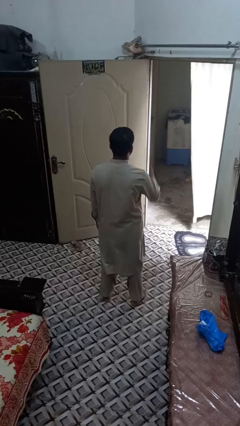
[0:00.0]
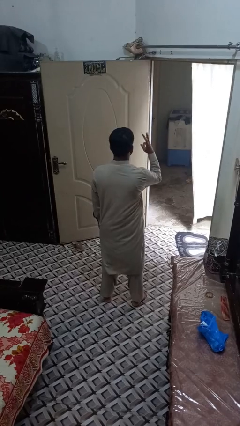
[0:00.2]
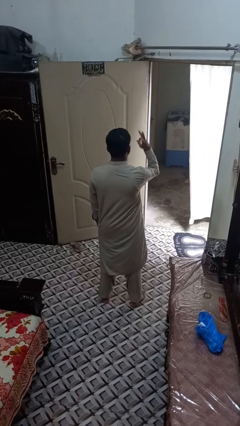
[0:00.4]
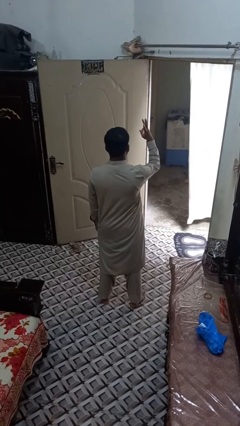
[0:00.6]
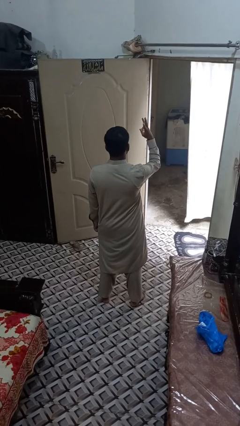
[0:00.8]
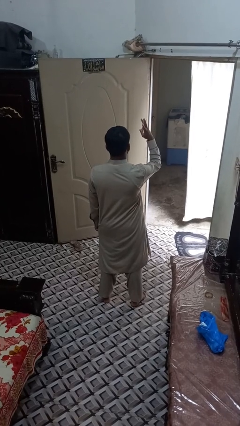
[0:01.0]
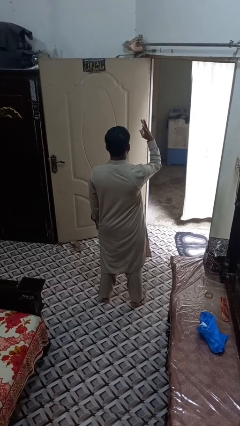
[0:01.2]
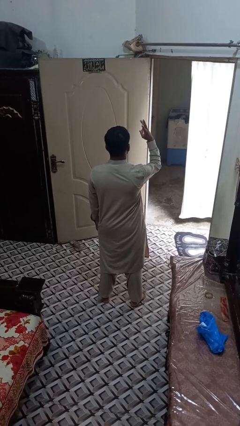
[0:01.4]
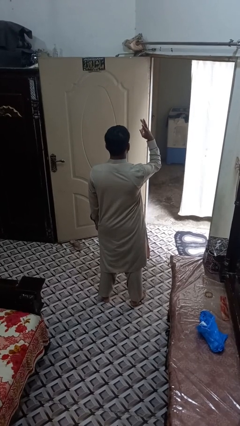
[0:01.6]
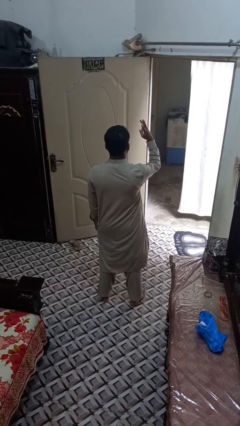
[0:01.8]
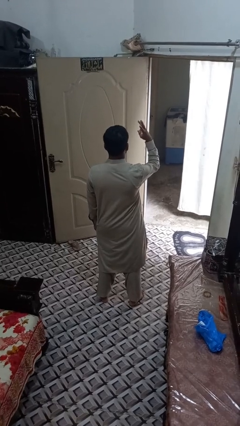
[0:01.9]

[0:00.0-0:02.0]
person gestures number three

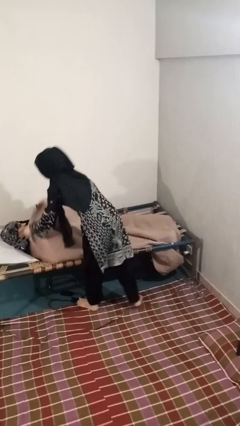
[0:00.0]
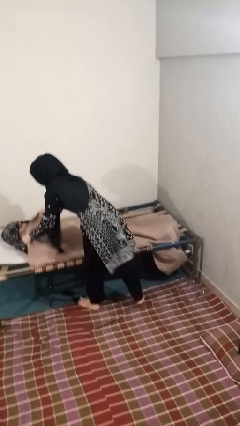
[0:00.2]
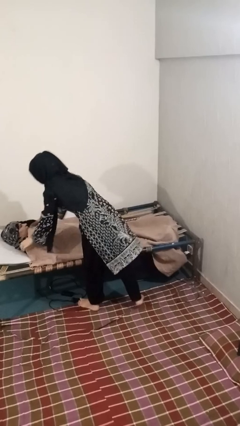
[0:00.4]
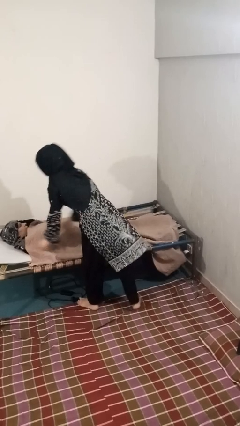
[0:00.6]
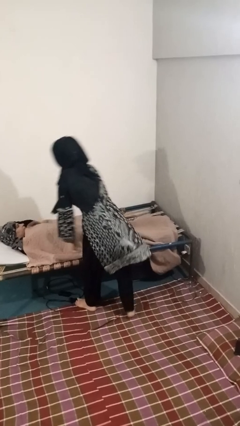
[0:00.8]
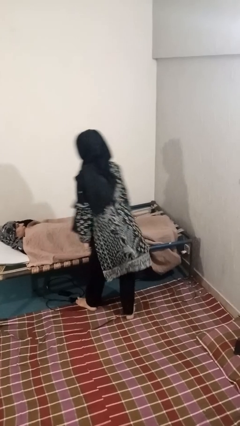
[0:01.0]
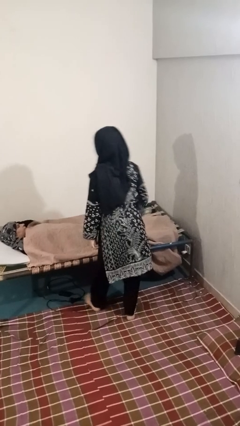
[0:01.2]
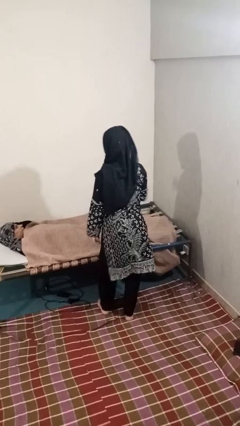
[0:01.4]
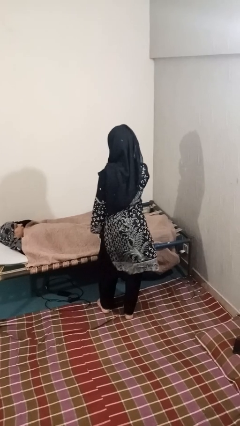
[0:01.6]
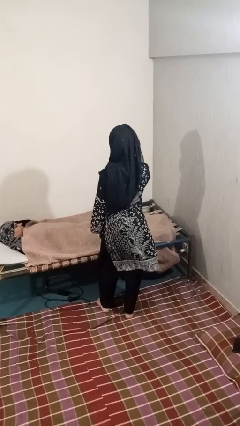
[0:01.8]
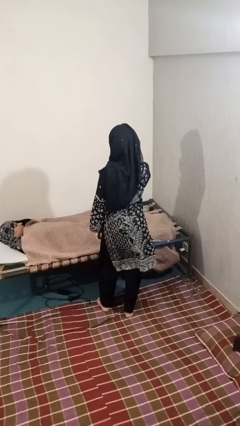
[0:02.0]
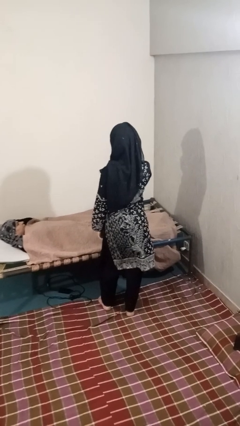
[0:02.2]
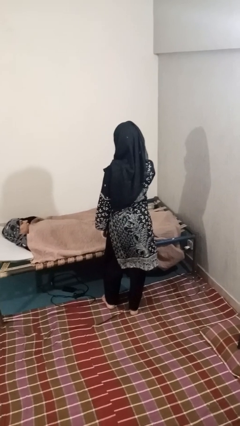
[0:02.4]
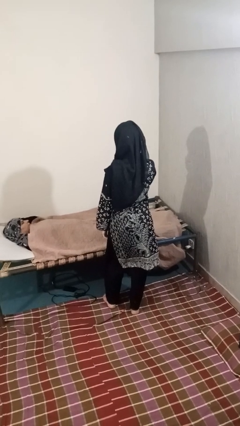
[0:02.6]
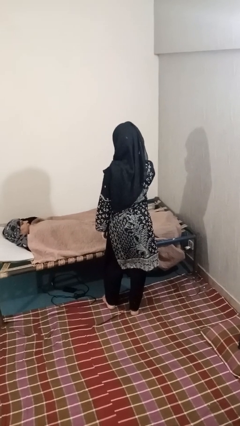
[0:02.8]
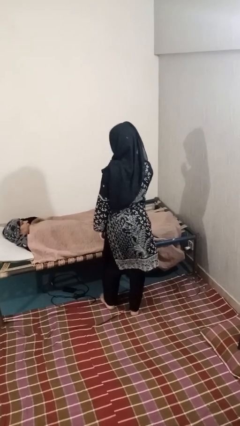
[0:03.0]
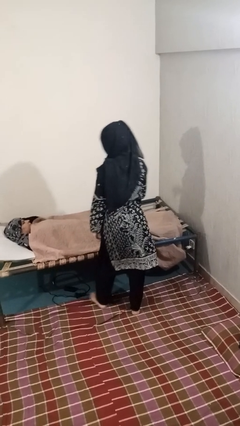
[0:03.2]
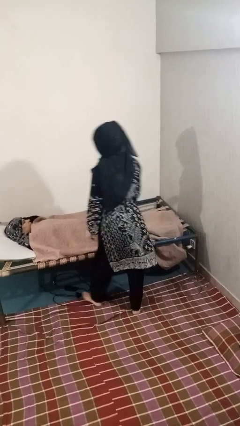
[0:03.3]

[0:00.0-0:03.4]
person covers friend with blanket

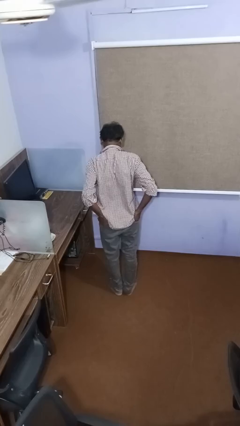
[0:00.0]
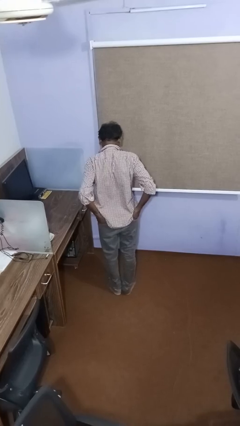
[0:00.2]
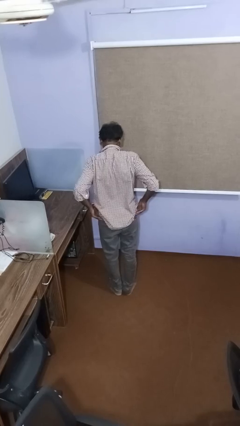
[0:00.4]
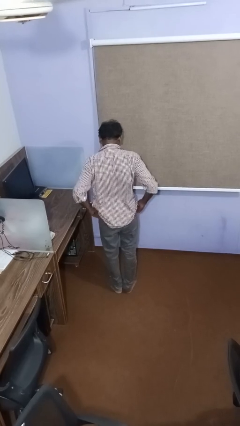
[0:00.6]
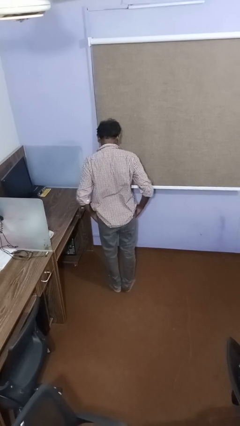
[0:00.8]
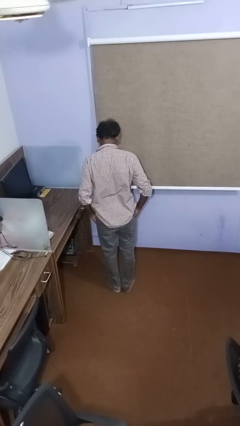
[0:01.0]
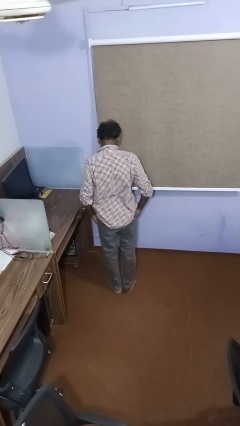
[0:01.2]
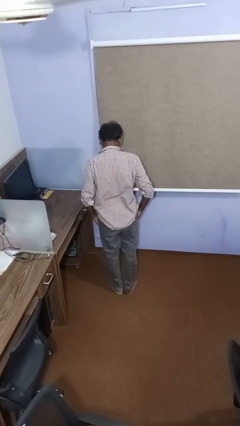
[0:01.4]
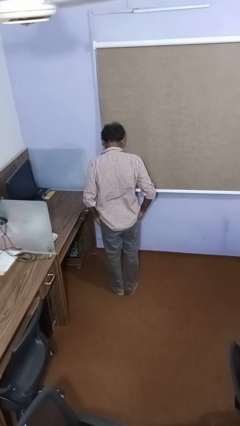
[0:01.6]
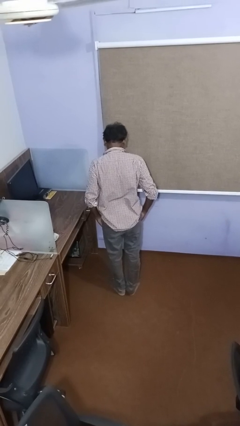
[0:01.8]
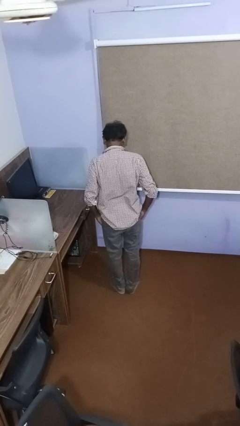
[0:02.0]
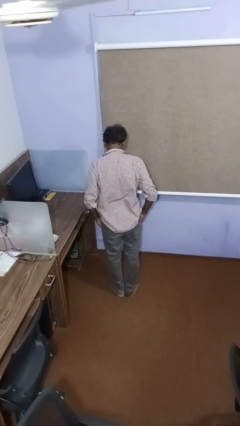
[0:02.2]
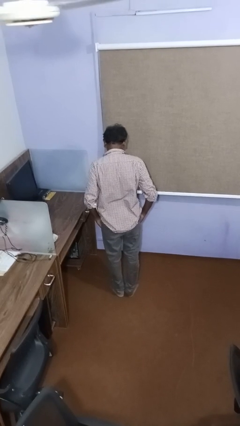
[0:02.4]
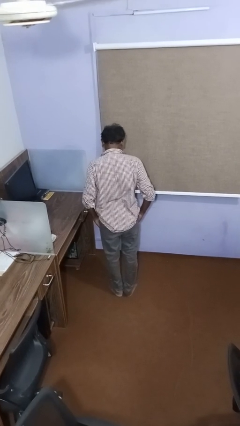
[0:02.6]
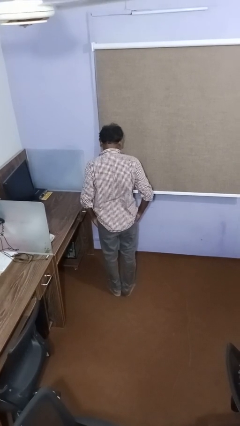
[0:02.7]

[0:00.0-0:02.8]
person puts hands in back pockets

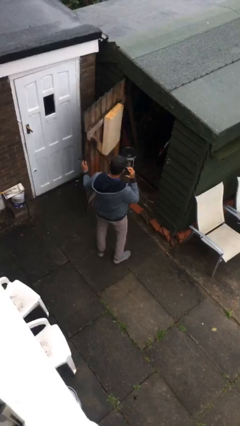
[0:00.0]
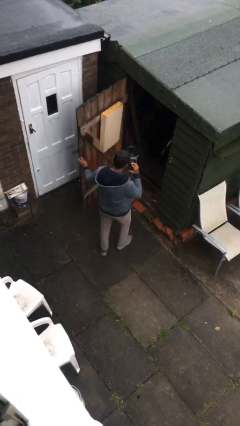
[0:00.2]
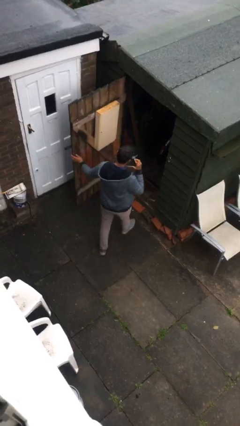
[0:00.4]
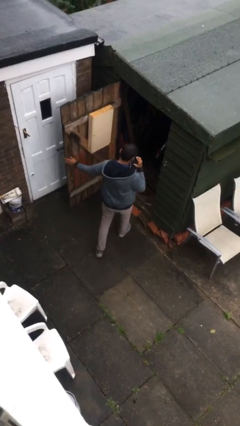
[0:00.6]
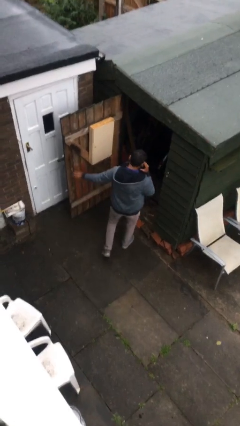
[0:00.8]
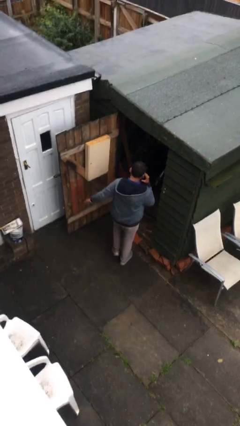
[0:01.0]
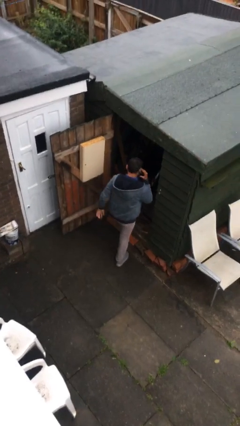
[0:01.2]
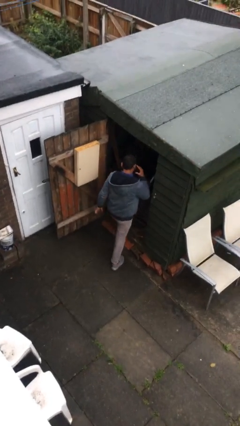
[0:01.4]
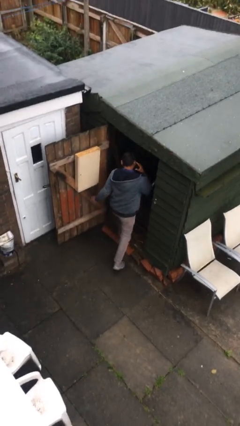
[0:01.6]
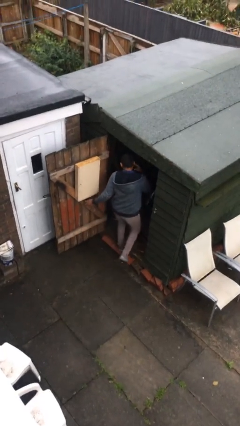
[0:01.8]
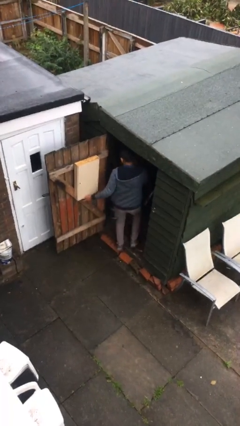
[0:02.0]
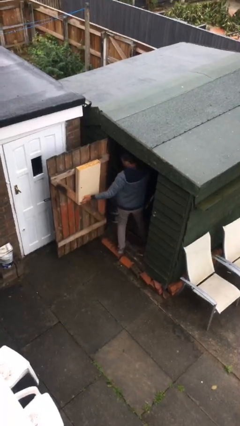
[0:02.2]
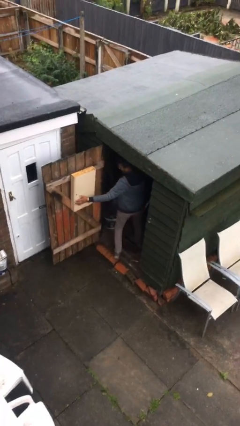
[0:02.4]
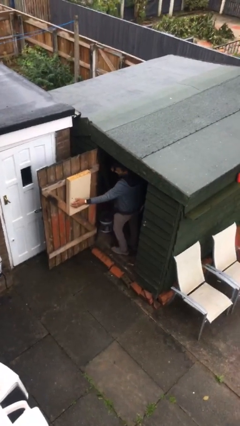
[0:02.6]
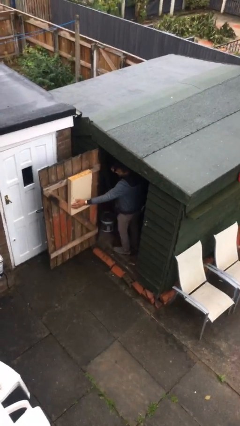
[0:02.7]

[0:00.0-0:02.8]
person exits scene through structure

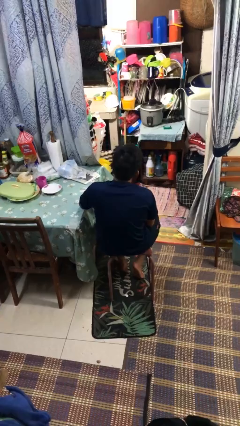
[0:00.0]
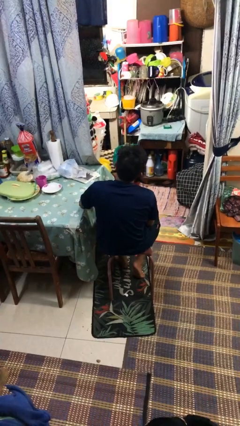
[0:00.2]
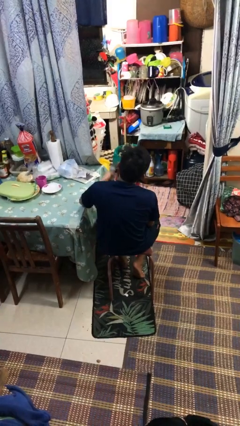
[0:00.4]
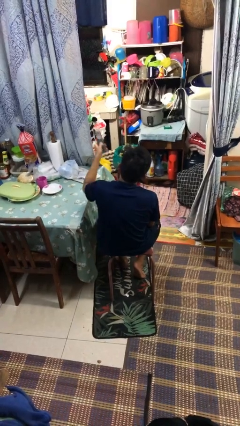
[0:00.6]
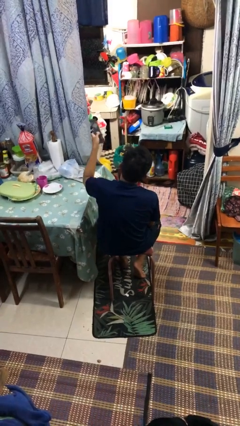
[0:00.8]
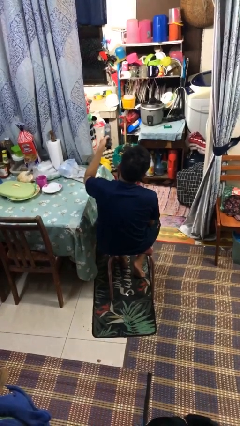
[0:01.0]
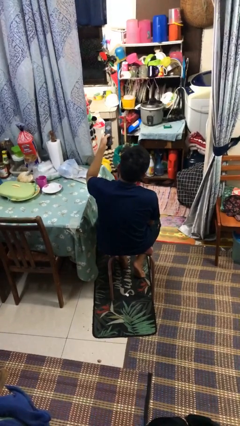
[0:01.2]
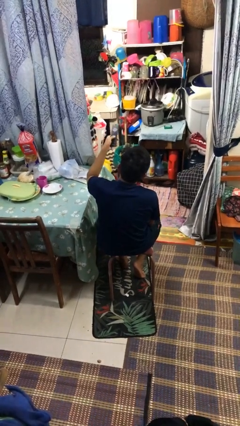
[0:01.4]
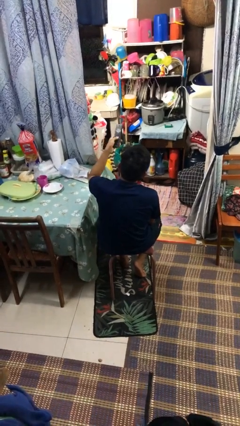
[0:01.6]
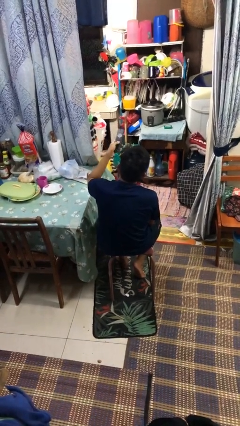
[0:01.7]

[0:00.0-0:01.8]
person uses television remote

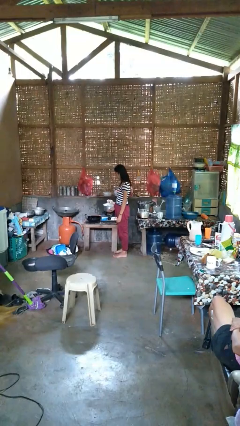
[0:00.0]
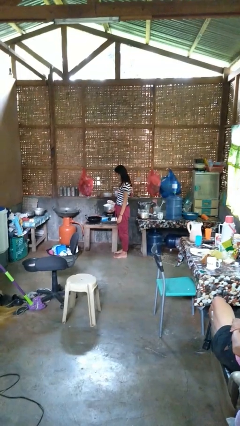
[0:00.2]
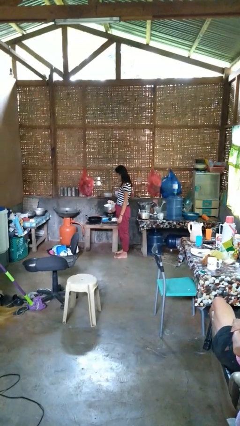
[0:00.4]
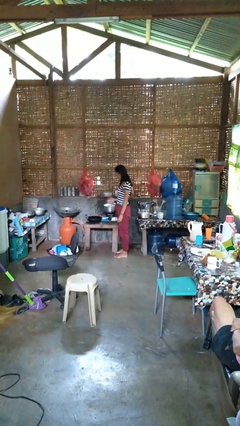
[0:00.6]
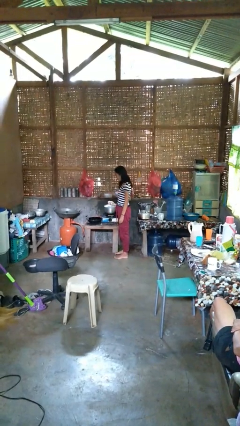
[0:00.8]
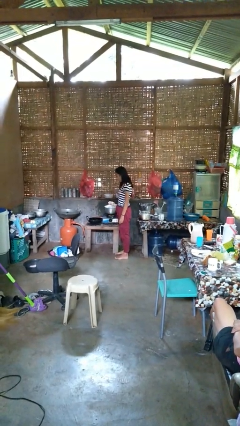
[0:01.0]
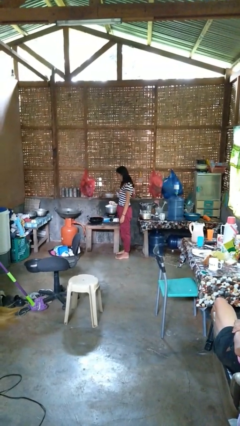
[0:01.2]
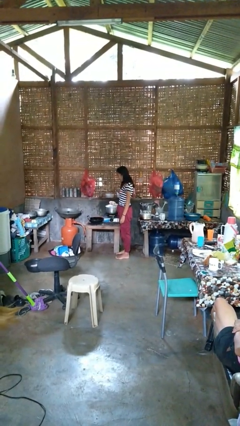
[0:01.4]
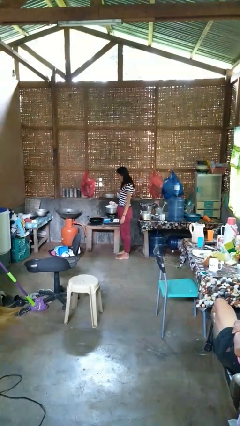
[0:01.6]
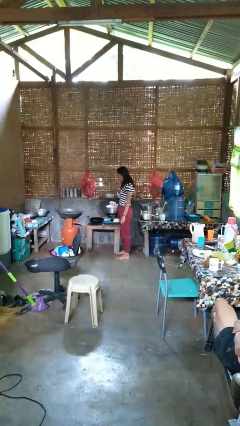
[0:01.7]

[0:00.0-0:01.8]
person burns hand

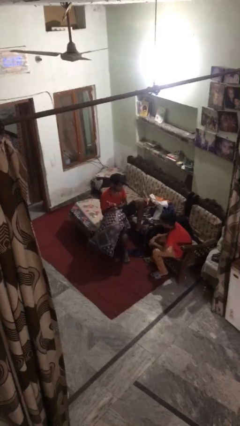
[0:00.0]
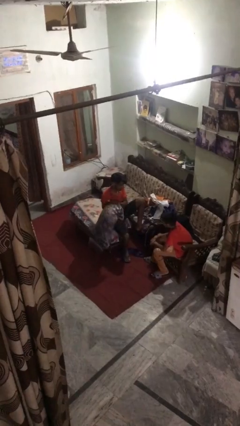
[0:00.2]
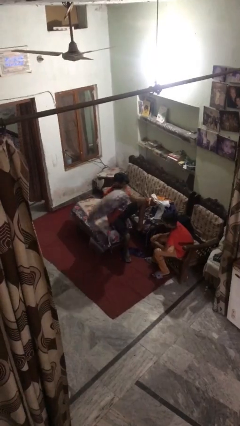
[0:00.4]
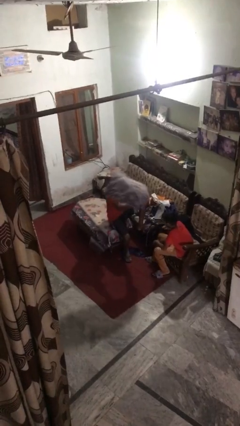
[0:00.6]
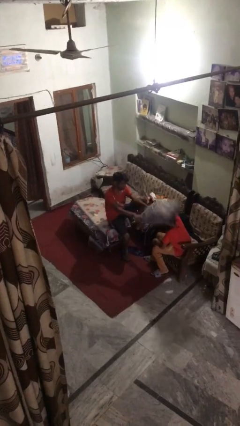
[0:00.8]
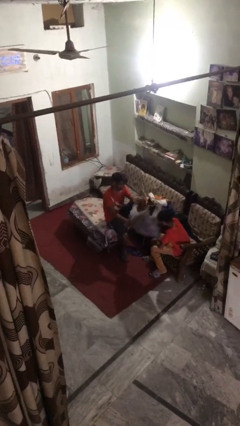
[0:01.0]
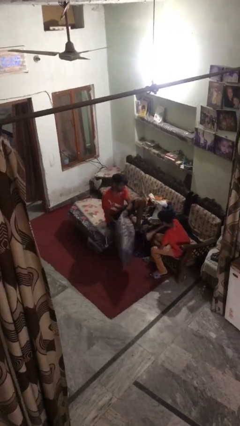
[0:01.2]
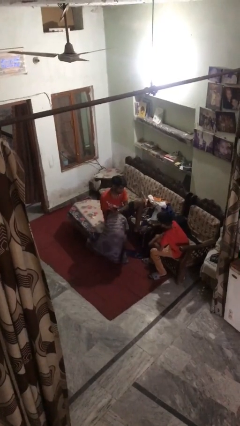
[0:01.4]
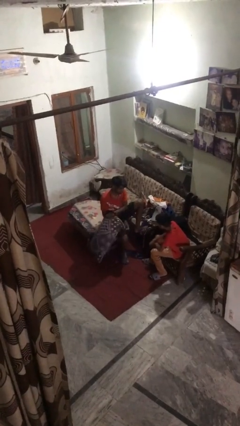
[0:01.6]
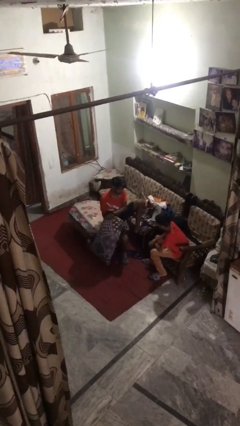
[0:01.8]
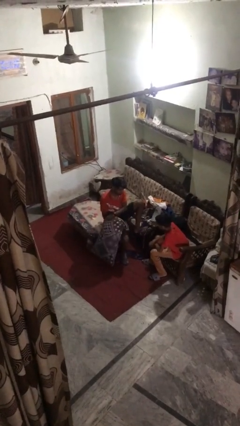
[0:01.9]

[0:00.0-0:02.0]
person hits person with pillow

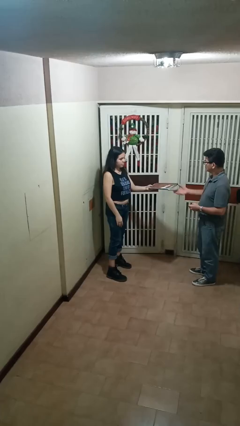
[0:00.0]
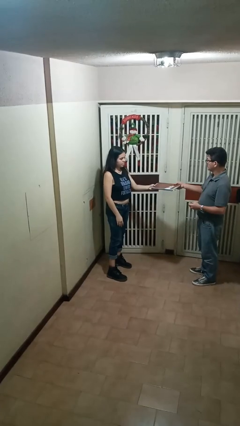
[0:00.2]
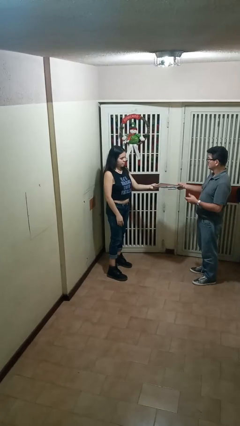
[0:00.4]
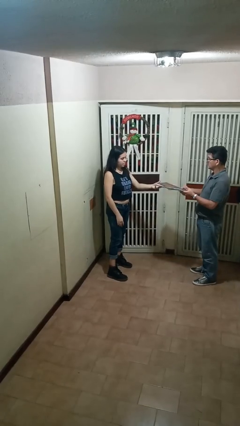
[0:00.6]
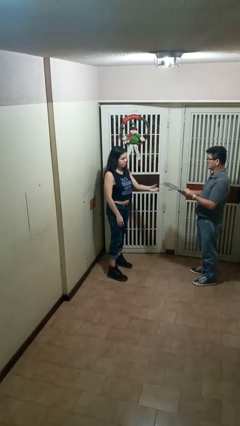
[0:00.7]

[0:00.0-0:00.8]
person transfers object to person
